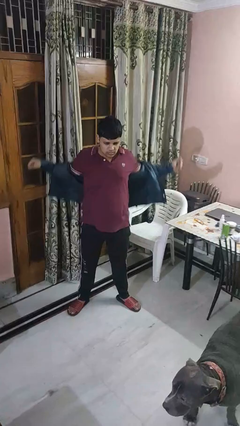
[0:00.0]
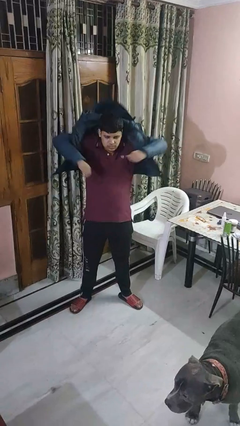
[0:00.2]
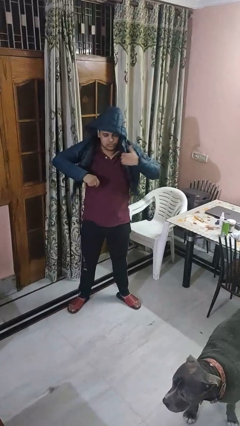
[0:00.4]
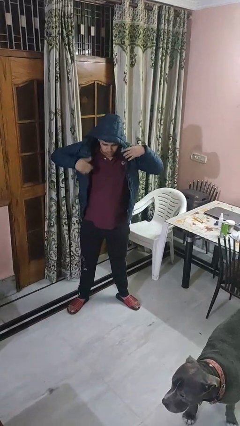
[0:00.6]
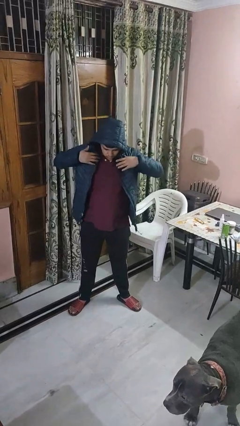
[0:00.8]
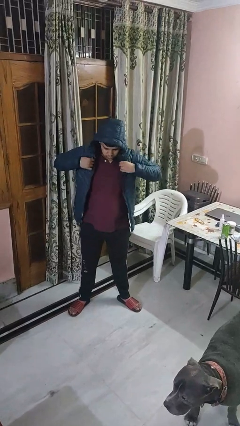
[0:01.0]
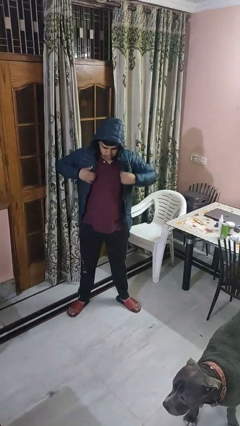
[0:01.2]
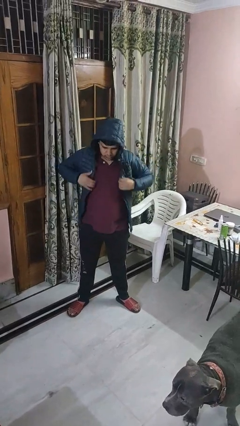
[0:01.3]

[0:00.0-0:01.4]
person puts on hoodie

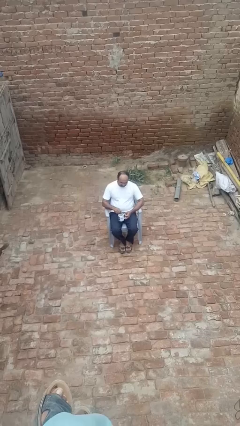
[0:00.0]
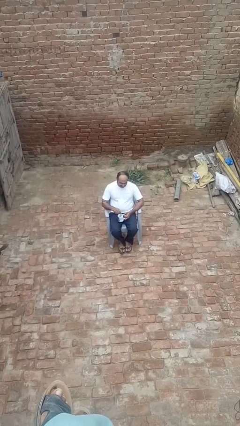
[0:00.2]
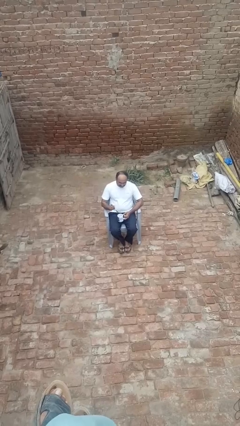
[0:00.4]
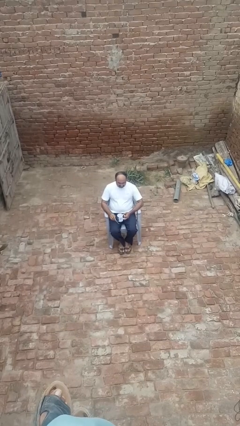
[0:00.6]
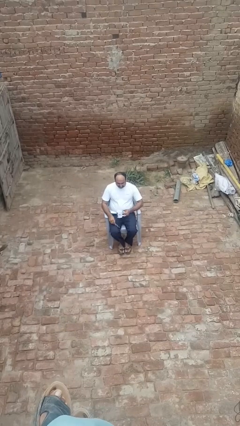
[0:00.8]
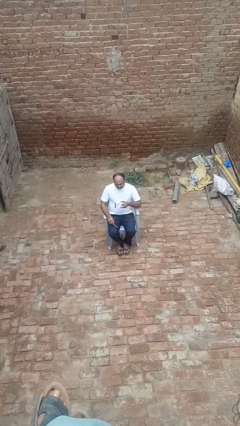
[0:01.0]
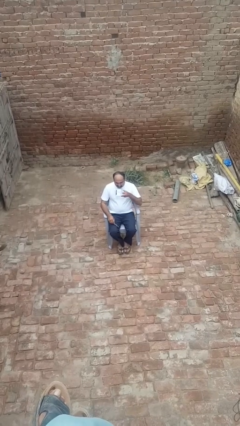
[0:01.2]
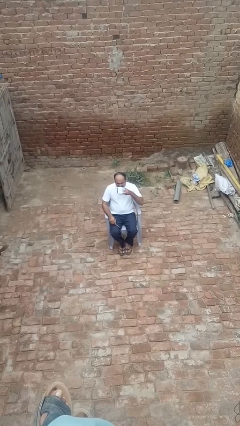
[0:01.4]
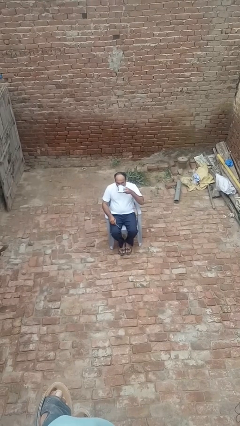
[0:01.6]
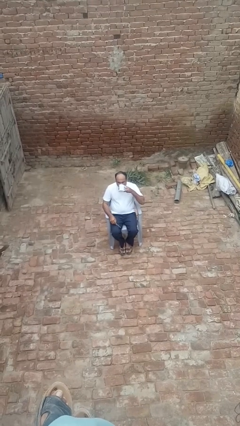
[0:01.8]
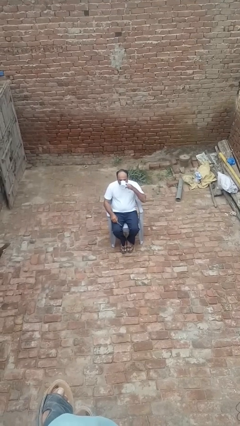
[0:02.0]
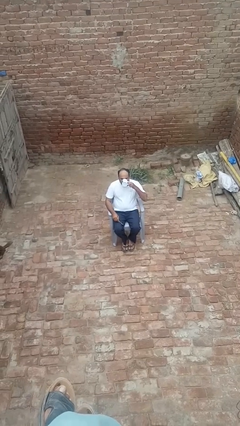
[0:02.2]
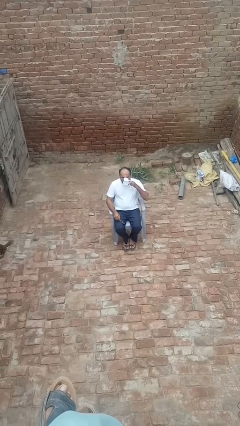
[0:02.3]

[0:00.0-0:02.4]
person drinks from mug

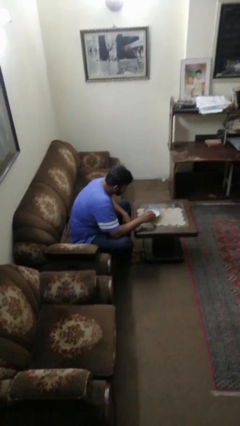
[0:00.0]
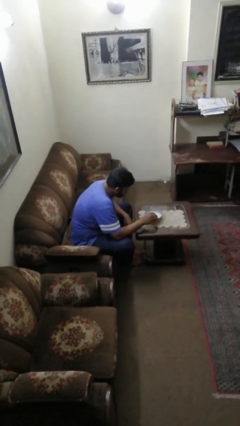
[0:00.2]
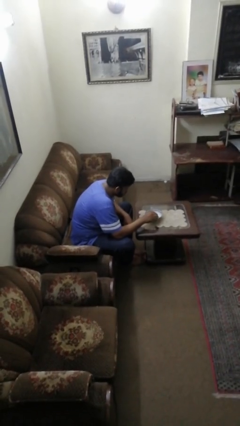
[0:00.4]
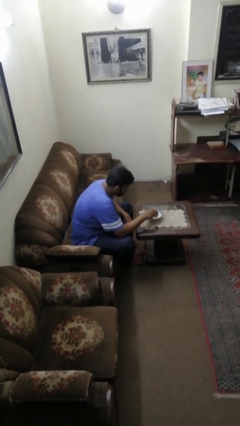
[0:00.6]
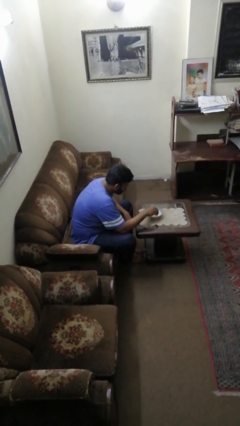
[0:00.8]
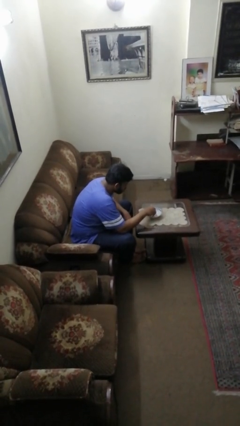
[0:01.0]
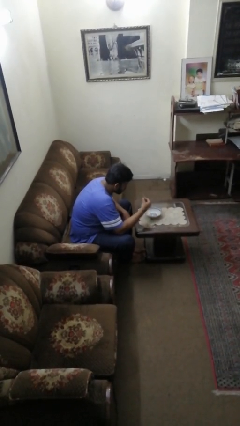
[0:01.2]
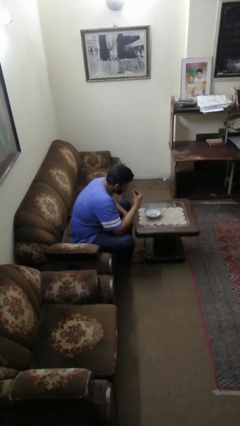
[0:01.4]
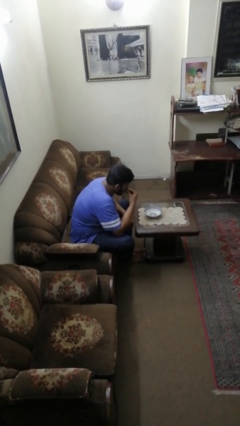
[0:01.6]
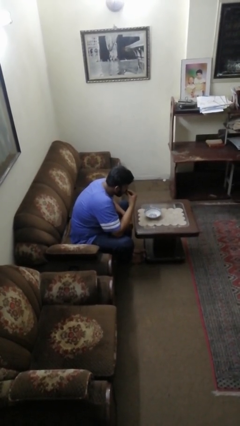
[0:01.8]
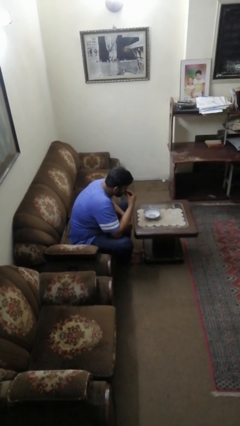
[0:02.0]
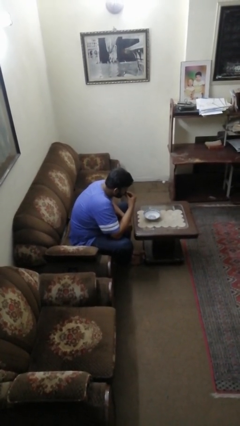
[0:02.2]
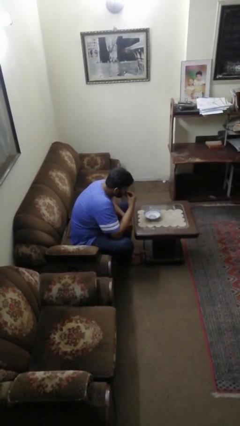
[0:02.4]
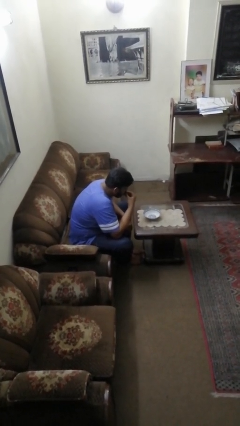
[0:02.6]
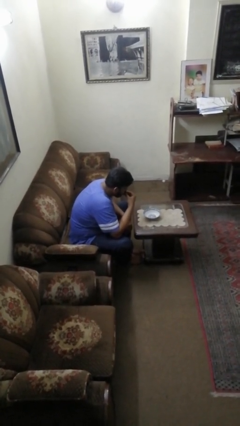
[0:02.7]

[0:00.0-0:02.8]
person eats with hands

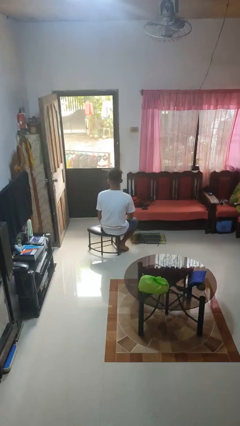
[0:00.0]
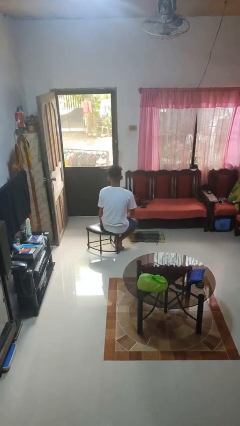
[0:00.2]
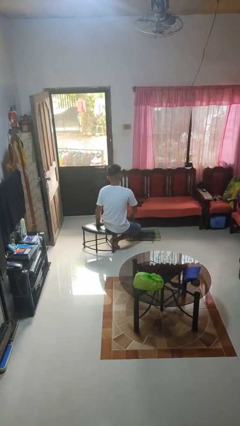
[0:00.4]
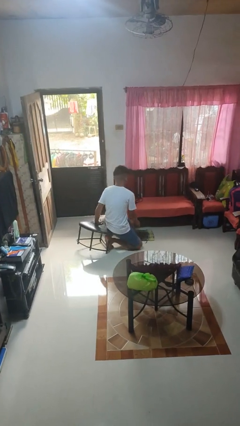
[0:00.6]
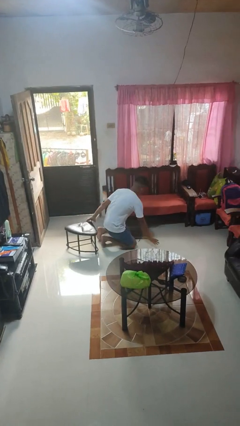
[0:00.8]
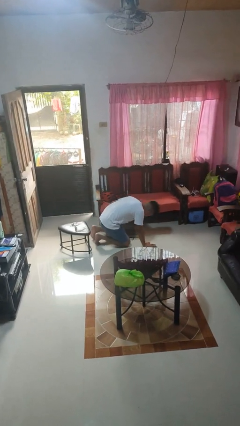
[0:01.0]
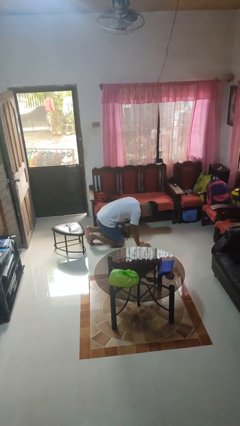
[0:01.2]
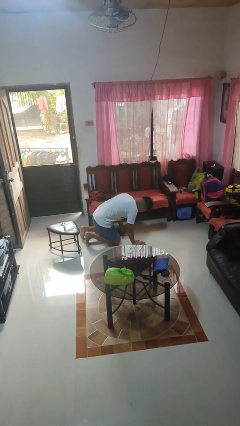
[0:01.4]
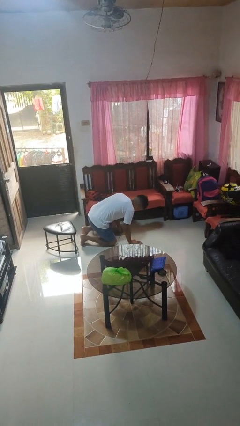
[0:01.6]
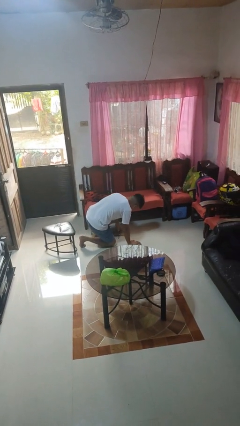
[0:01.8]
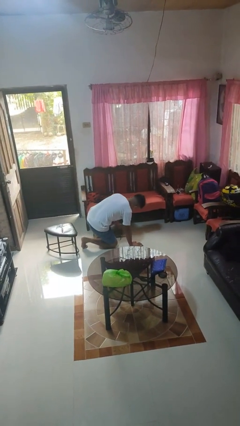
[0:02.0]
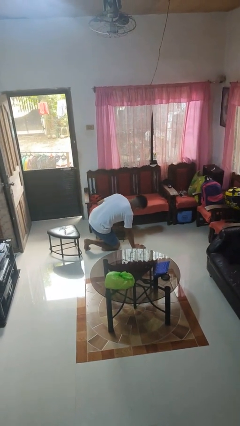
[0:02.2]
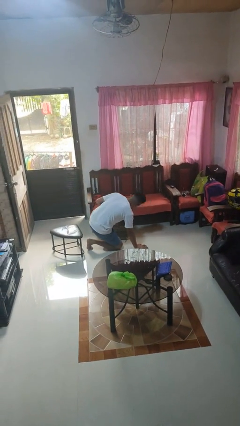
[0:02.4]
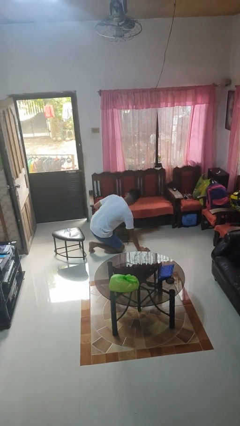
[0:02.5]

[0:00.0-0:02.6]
person falls from chair

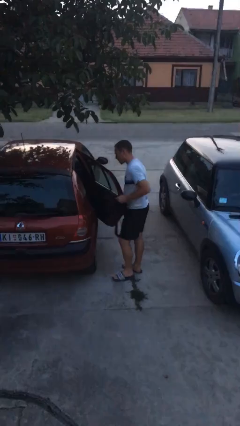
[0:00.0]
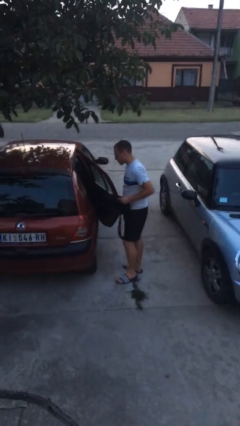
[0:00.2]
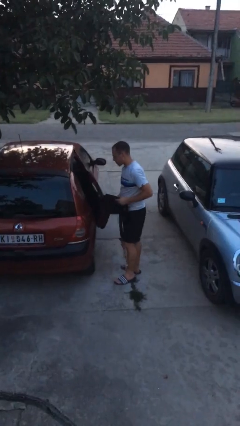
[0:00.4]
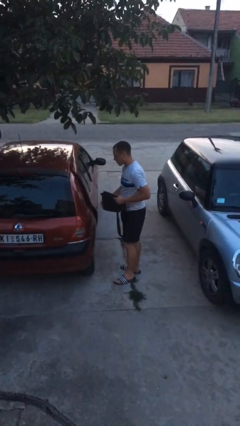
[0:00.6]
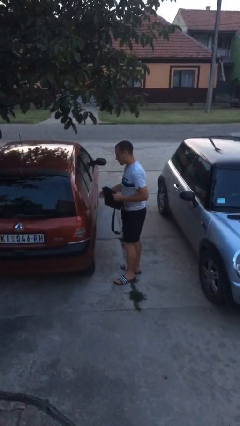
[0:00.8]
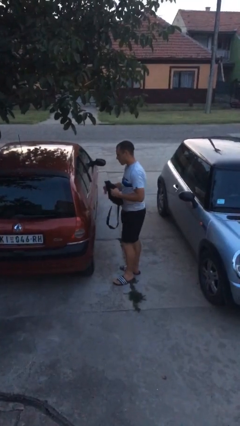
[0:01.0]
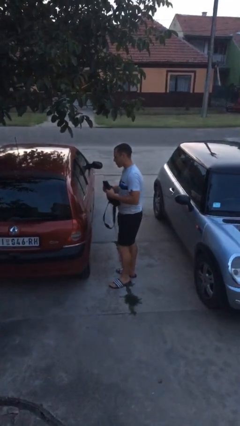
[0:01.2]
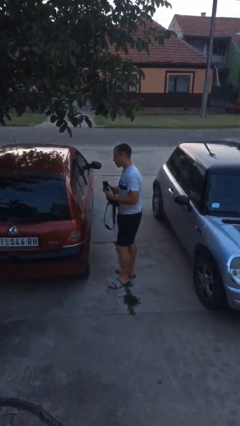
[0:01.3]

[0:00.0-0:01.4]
person closes car door

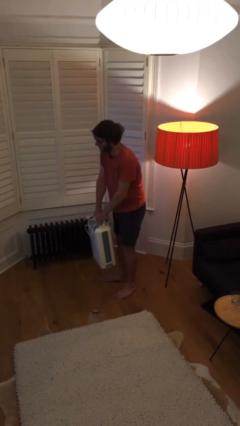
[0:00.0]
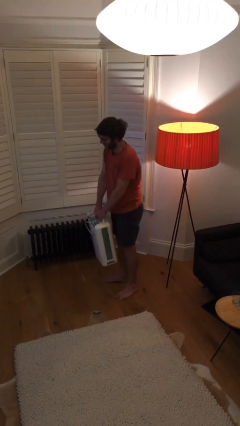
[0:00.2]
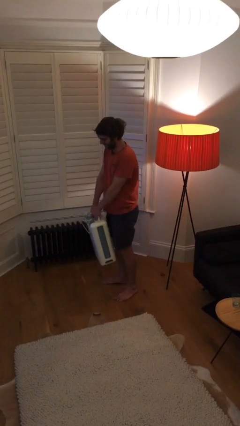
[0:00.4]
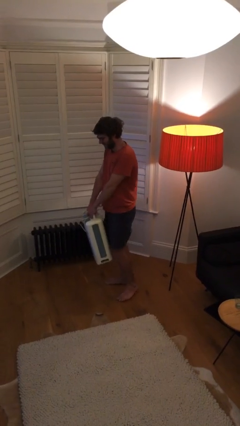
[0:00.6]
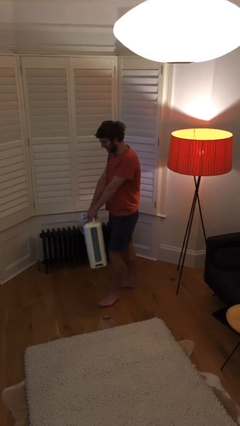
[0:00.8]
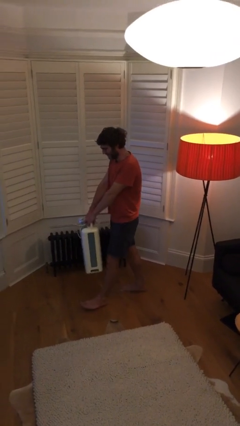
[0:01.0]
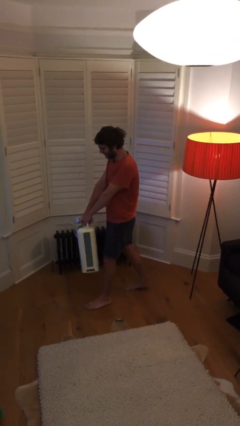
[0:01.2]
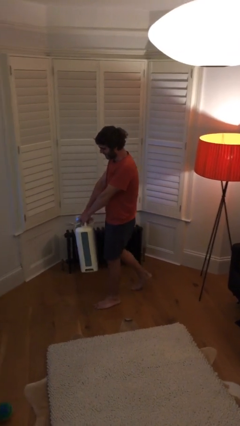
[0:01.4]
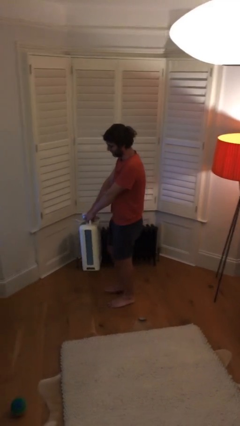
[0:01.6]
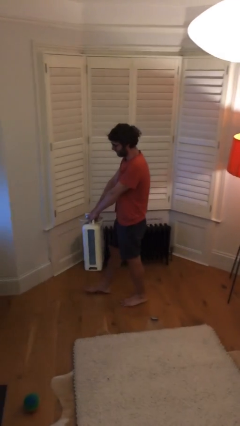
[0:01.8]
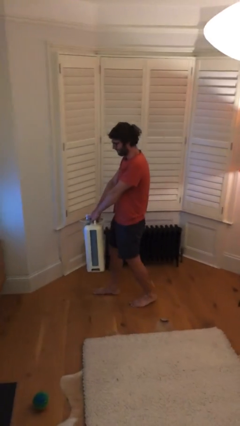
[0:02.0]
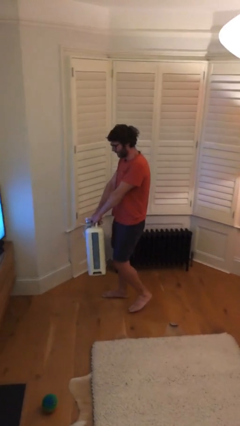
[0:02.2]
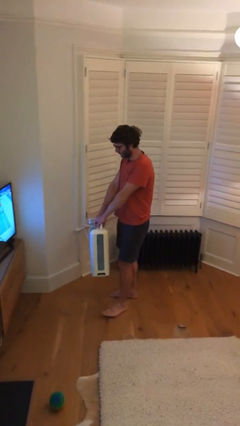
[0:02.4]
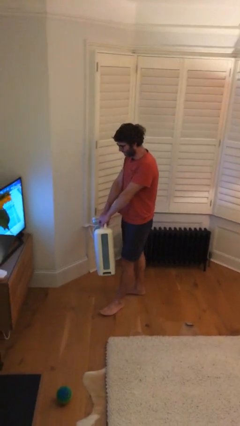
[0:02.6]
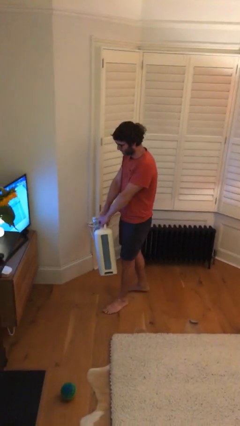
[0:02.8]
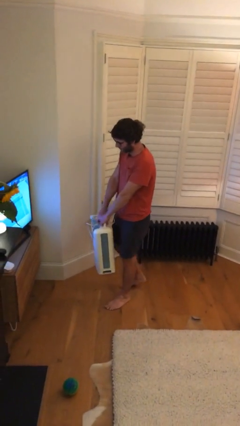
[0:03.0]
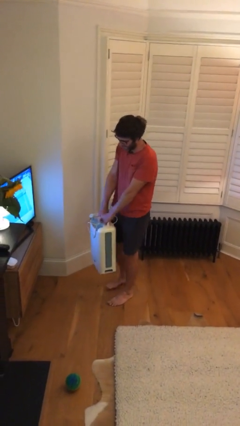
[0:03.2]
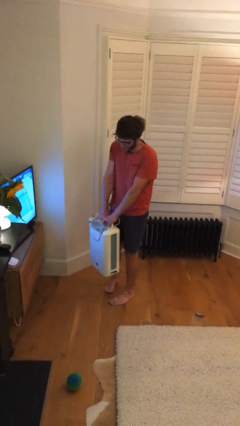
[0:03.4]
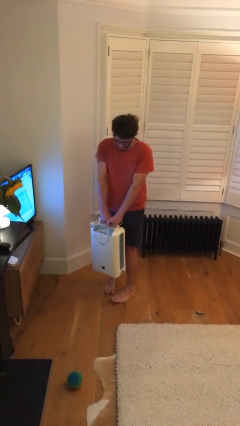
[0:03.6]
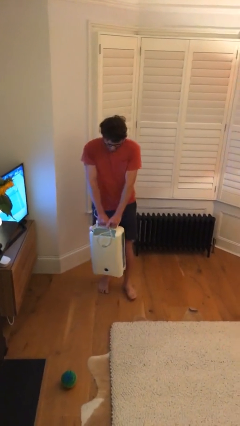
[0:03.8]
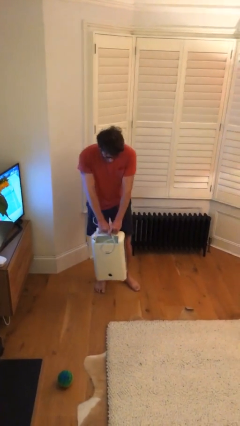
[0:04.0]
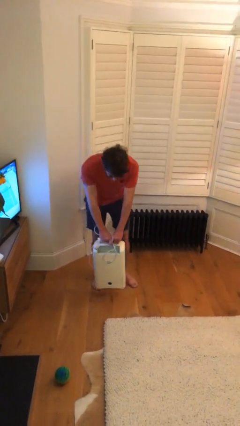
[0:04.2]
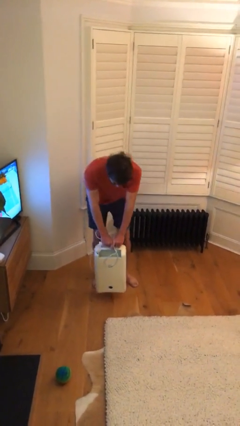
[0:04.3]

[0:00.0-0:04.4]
person carries heavy object

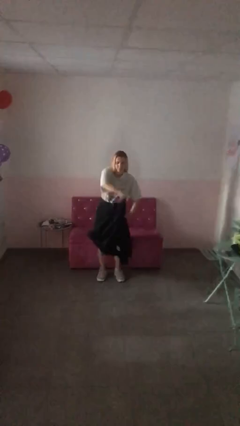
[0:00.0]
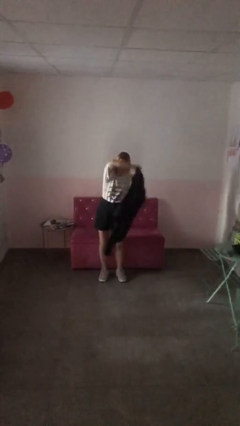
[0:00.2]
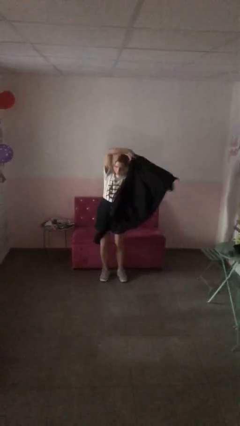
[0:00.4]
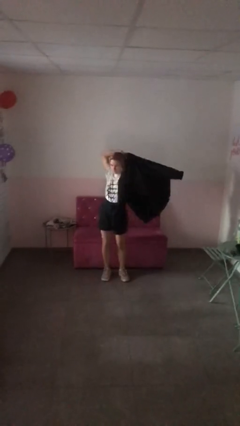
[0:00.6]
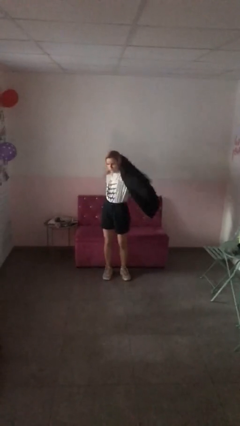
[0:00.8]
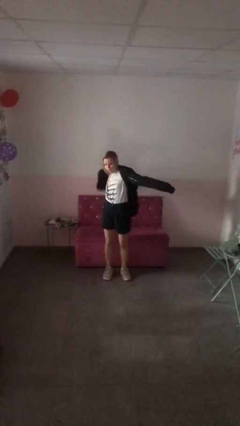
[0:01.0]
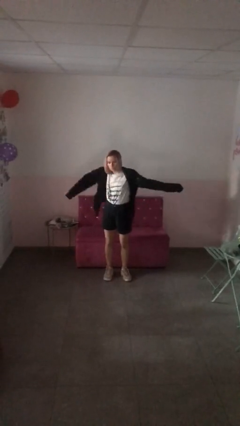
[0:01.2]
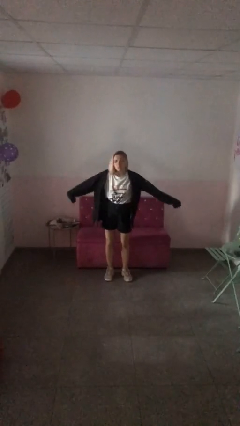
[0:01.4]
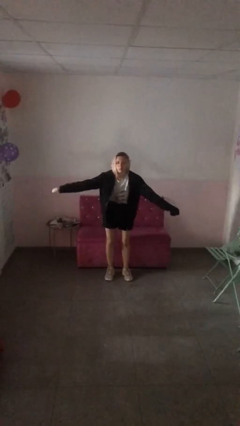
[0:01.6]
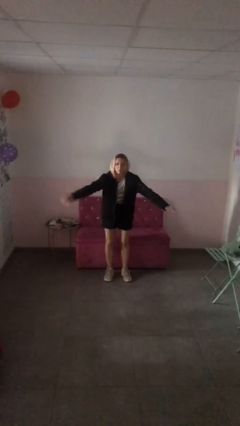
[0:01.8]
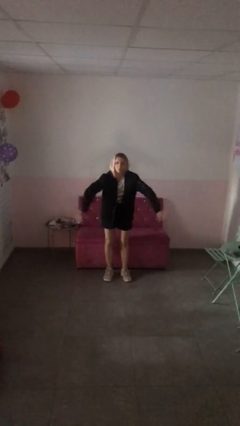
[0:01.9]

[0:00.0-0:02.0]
person puts on jacket
